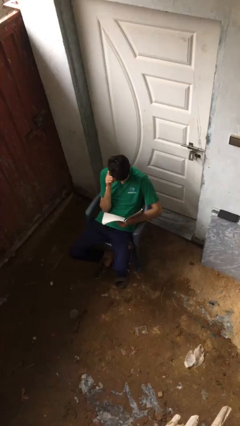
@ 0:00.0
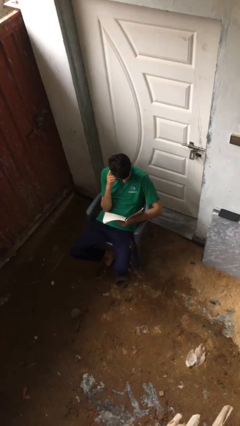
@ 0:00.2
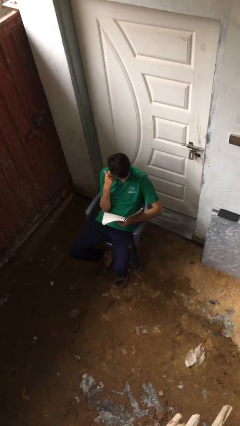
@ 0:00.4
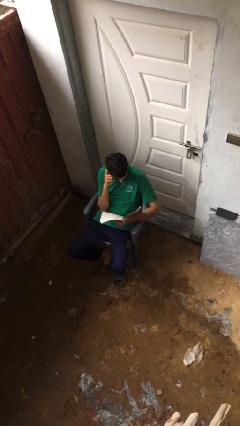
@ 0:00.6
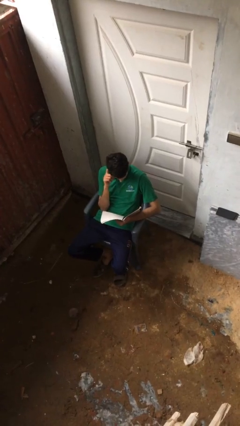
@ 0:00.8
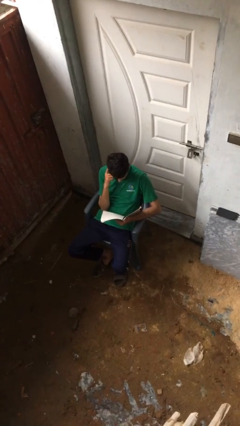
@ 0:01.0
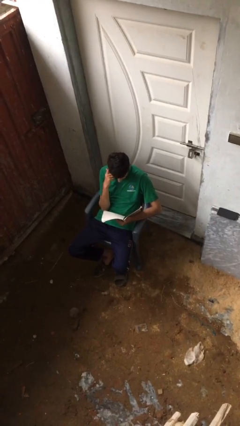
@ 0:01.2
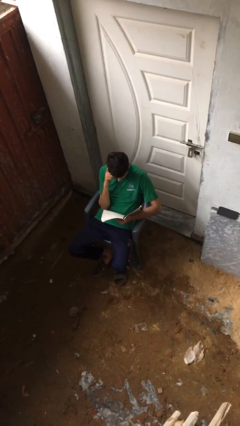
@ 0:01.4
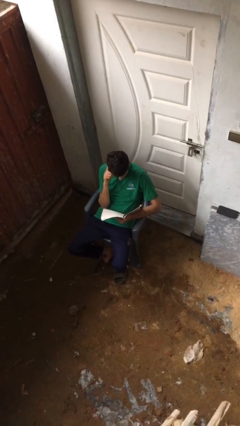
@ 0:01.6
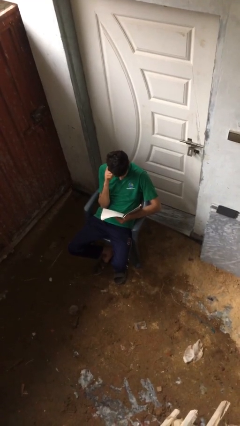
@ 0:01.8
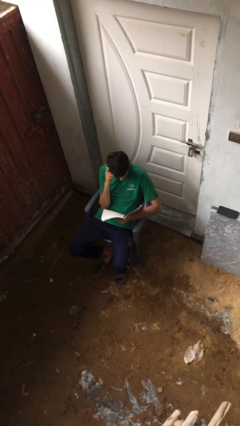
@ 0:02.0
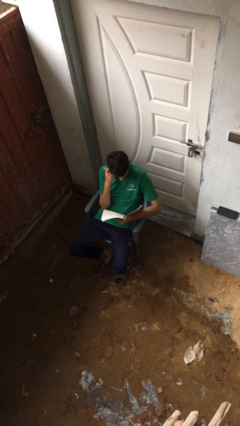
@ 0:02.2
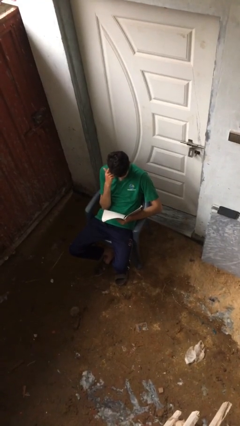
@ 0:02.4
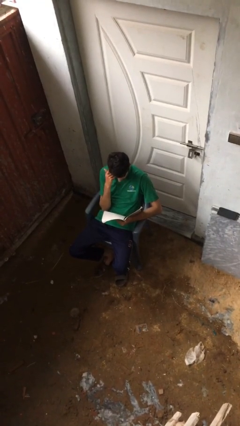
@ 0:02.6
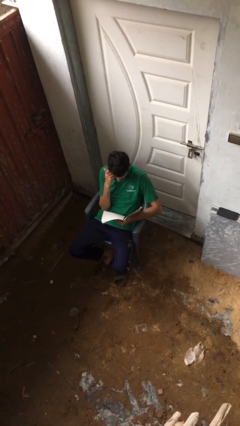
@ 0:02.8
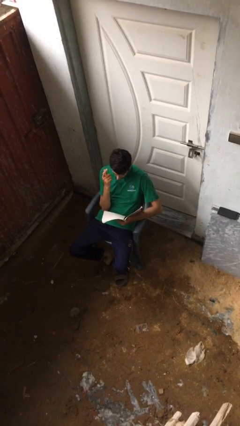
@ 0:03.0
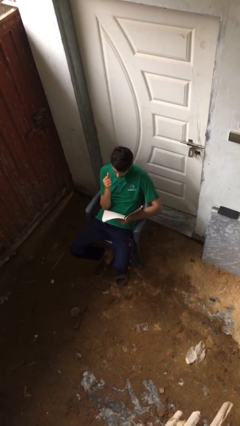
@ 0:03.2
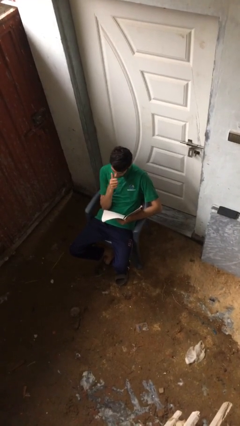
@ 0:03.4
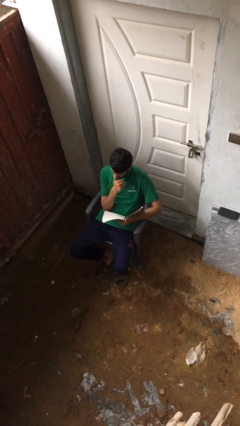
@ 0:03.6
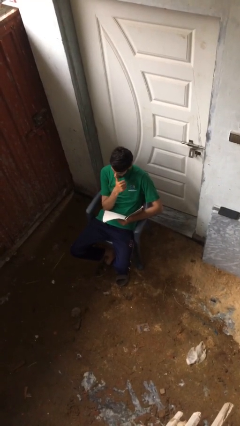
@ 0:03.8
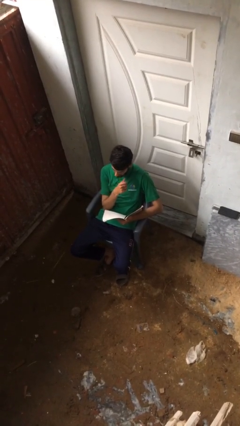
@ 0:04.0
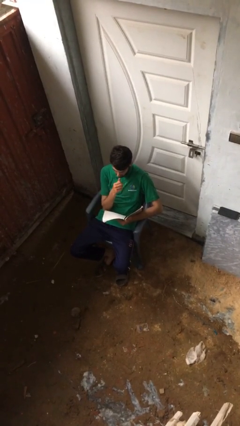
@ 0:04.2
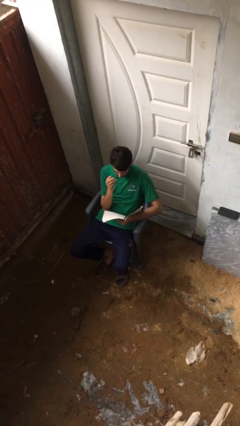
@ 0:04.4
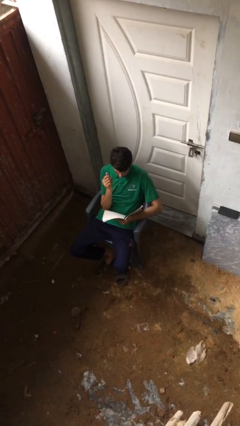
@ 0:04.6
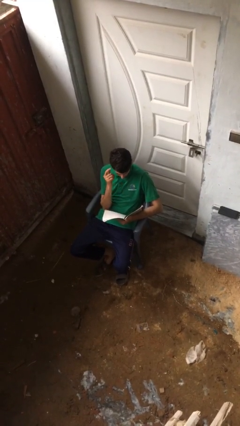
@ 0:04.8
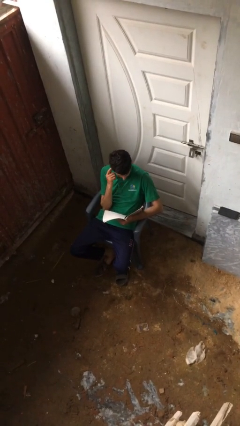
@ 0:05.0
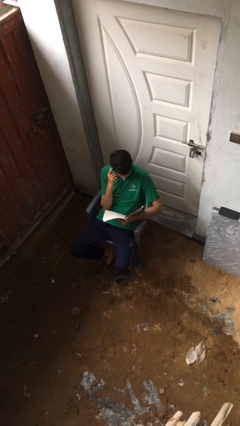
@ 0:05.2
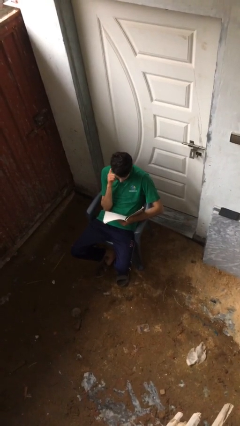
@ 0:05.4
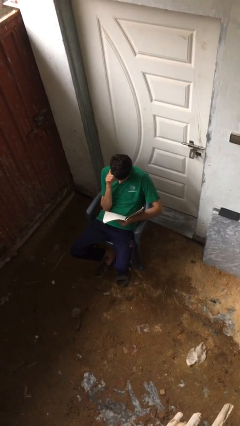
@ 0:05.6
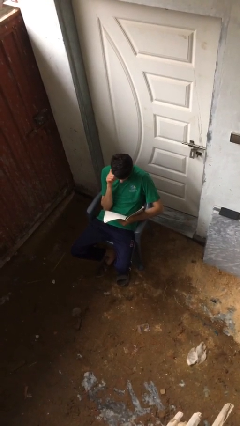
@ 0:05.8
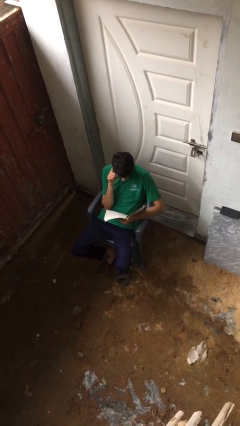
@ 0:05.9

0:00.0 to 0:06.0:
person reads document

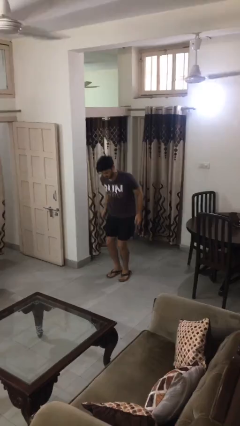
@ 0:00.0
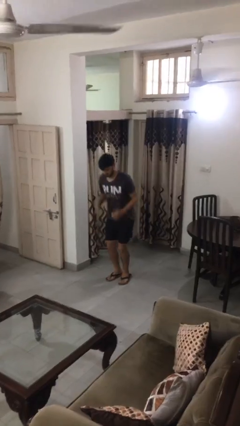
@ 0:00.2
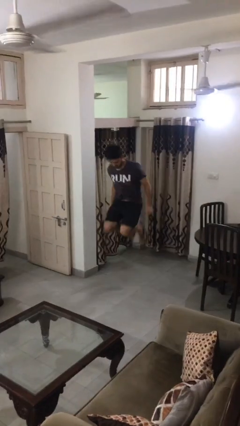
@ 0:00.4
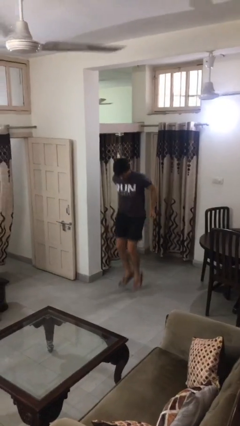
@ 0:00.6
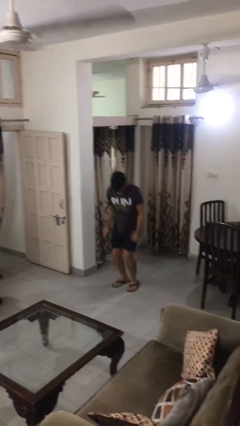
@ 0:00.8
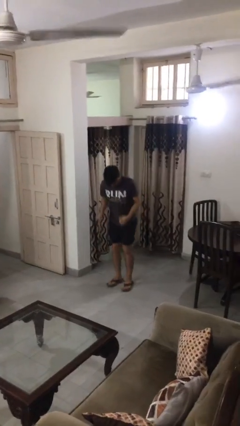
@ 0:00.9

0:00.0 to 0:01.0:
person jumps

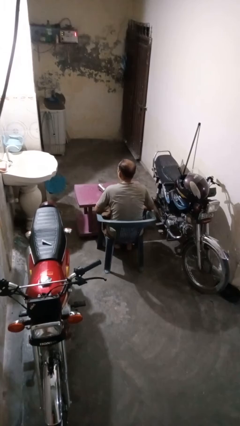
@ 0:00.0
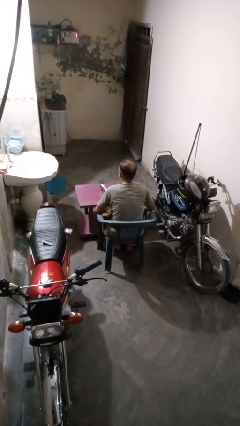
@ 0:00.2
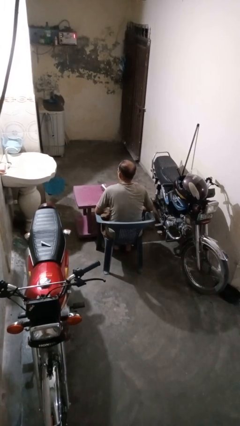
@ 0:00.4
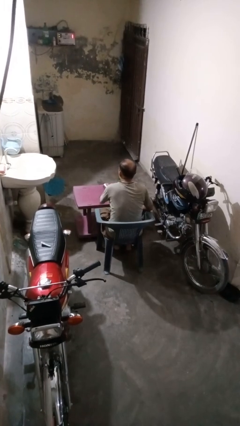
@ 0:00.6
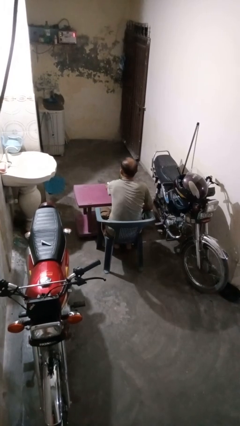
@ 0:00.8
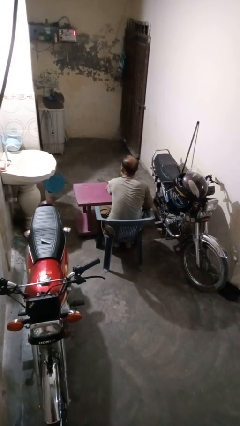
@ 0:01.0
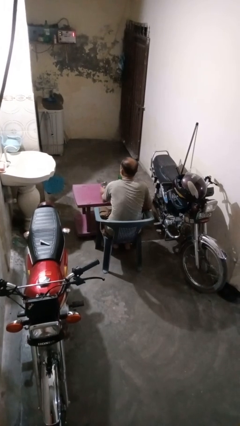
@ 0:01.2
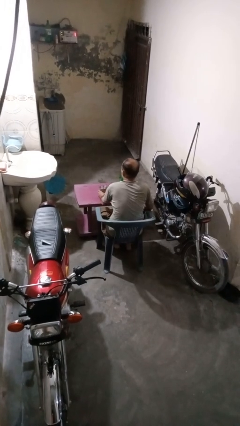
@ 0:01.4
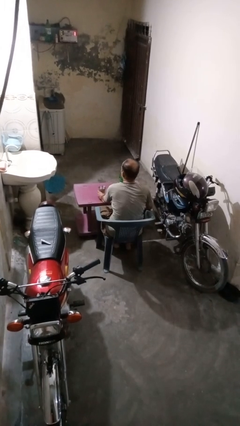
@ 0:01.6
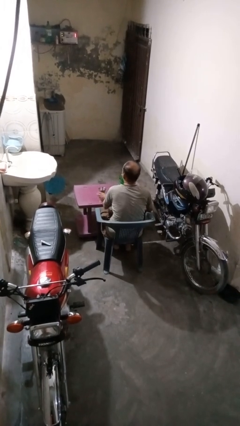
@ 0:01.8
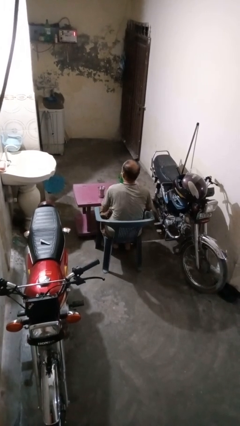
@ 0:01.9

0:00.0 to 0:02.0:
person sets upright glass

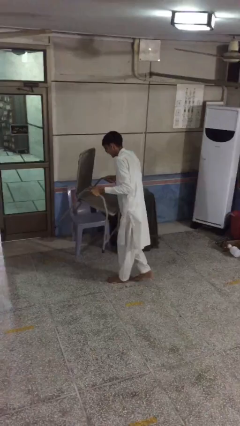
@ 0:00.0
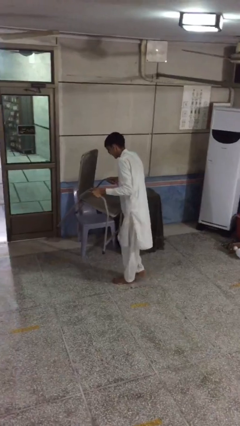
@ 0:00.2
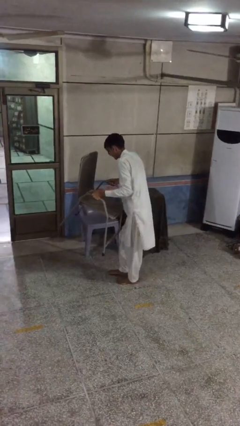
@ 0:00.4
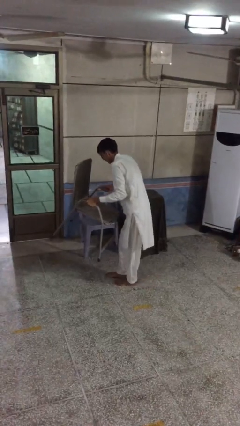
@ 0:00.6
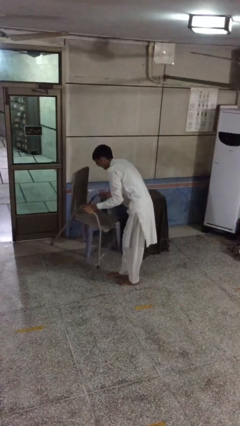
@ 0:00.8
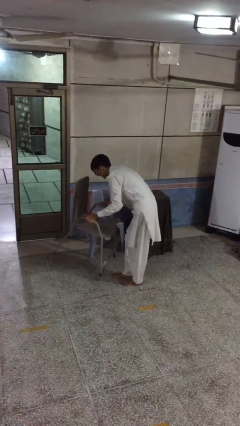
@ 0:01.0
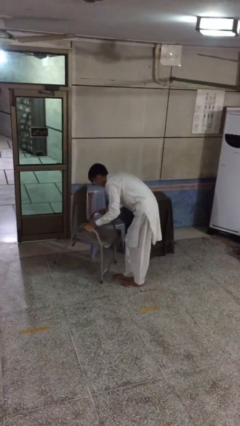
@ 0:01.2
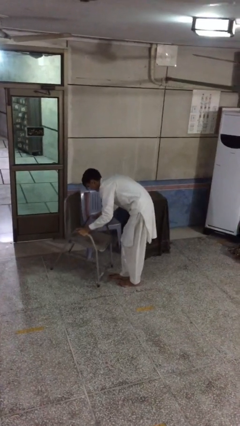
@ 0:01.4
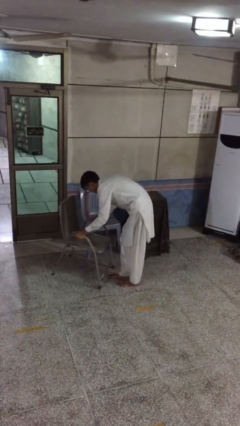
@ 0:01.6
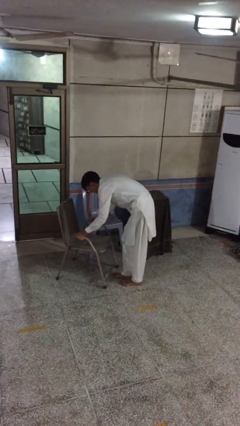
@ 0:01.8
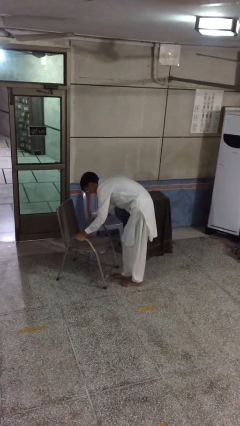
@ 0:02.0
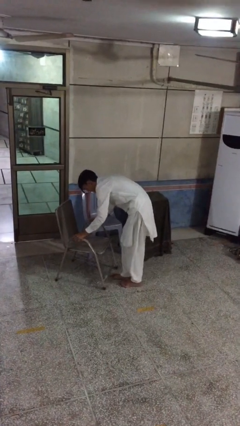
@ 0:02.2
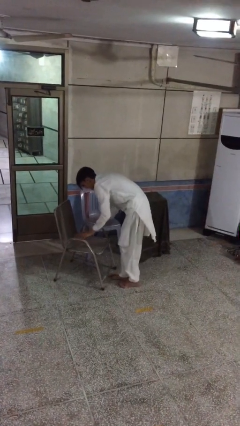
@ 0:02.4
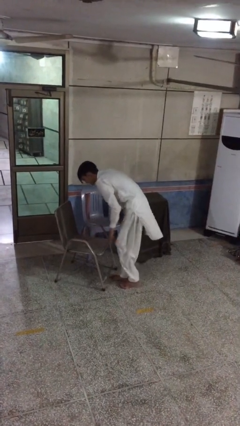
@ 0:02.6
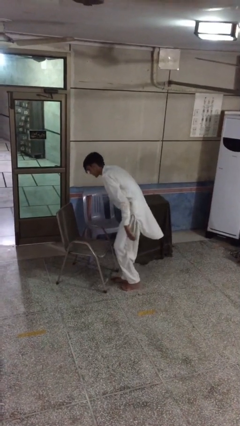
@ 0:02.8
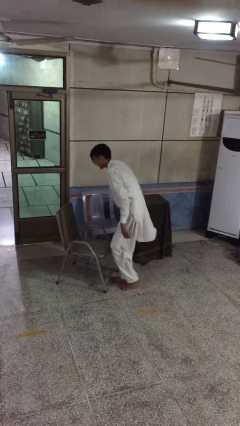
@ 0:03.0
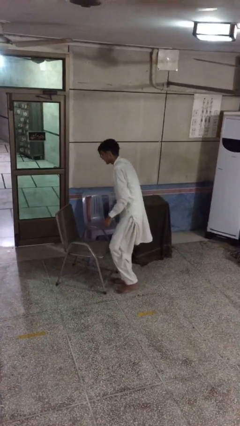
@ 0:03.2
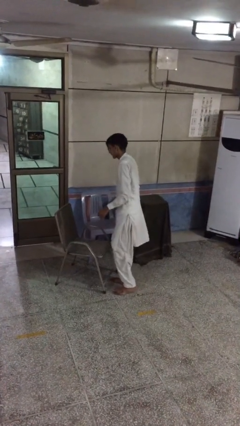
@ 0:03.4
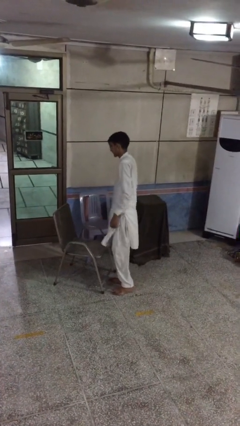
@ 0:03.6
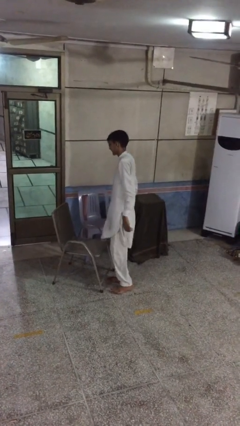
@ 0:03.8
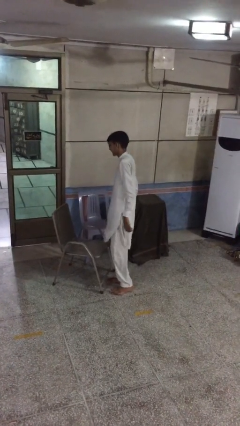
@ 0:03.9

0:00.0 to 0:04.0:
person puts down object on floor

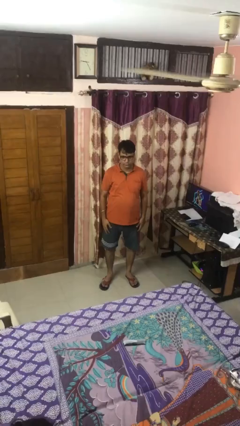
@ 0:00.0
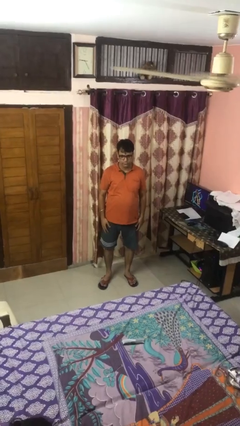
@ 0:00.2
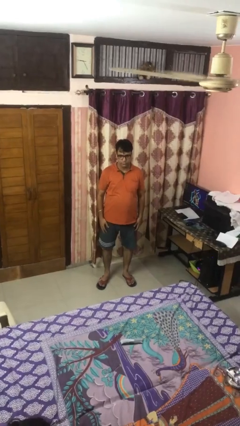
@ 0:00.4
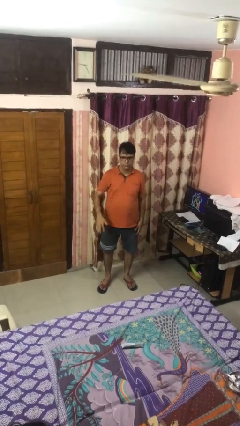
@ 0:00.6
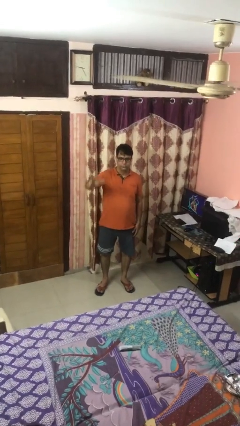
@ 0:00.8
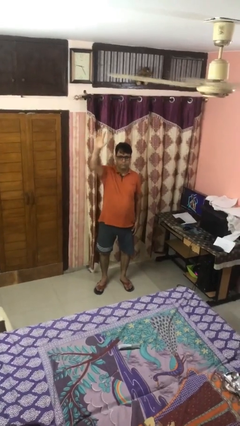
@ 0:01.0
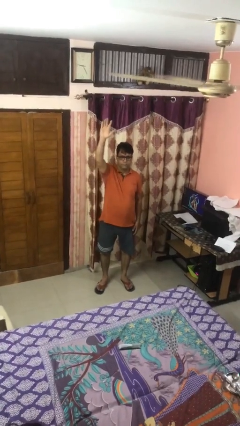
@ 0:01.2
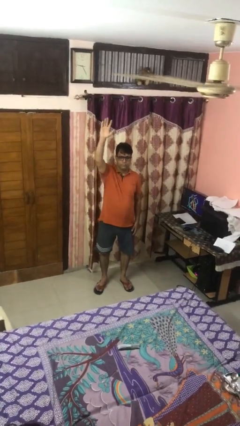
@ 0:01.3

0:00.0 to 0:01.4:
person gestures raise hand

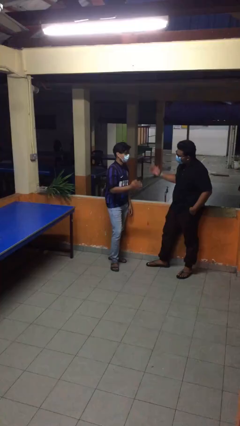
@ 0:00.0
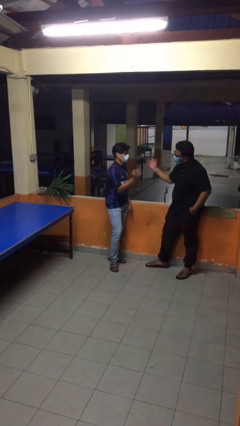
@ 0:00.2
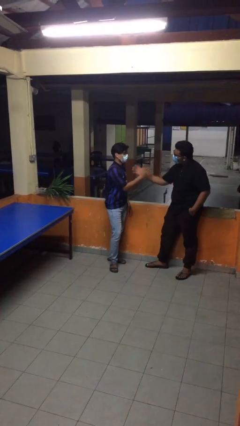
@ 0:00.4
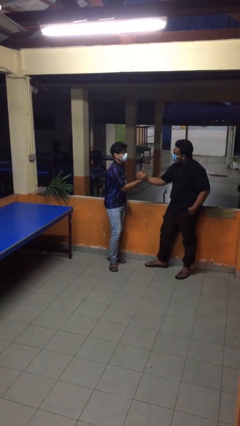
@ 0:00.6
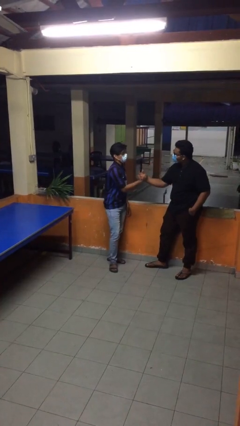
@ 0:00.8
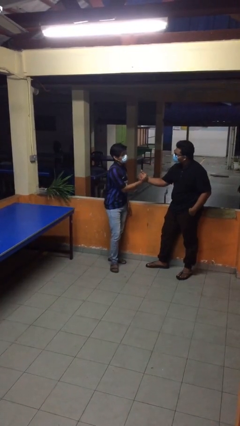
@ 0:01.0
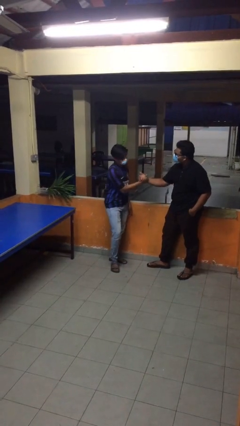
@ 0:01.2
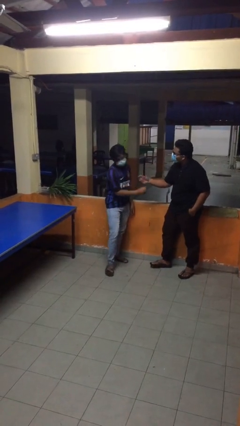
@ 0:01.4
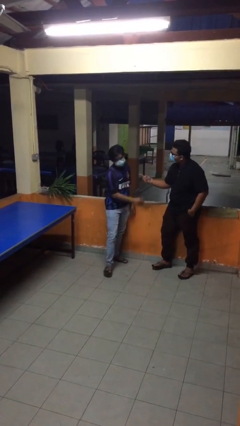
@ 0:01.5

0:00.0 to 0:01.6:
person shakes hand

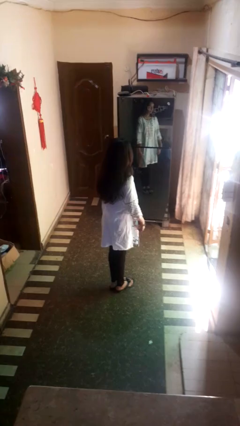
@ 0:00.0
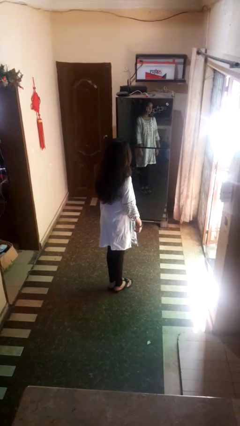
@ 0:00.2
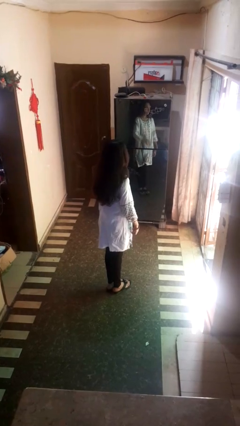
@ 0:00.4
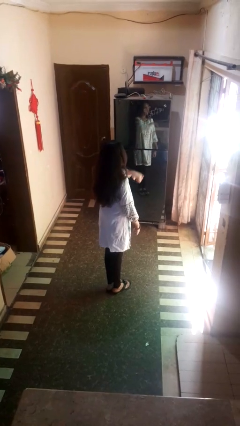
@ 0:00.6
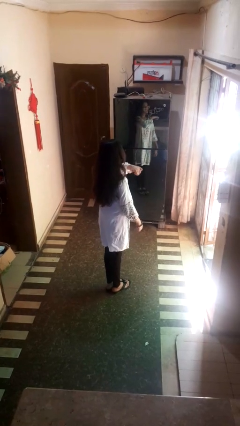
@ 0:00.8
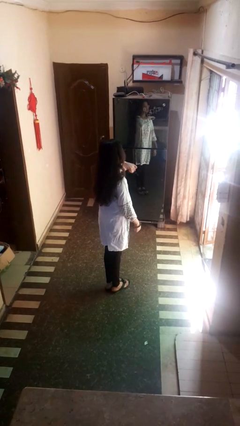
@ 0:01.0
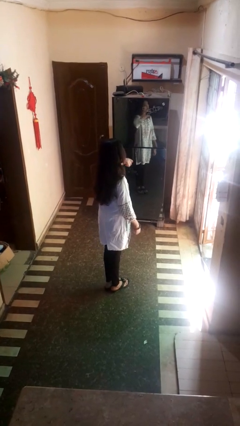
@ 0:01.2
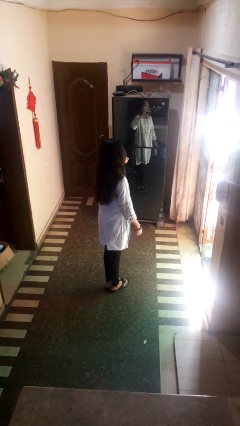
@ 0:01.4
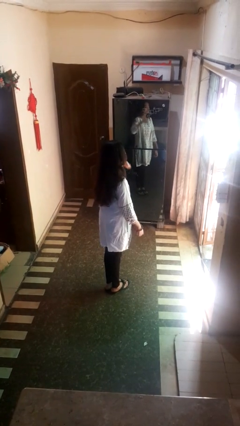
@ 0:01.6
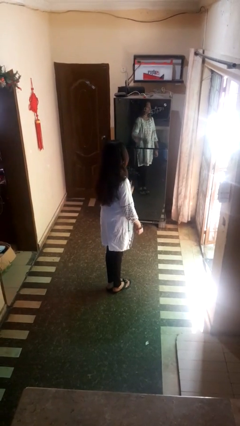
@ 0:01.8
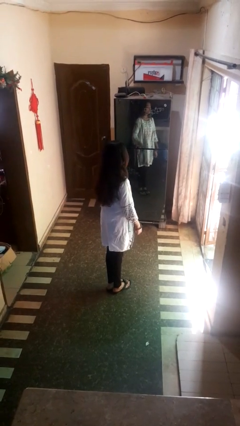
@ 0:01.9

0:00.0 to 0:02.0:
person gestures cut
